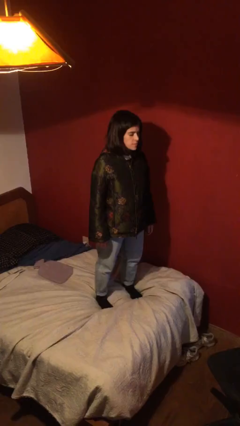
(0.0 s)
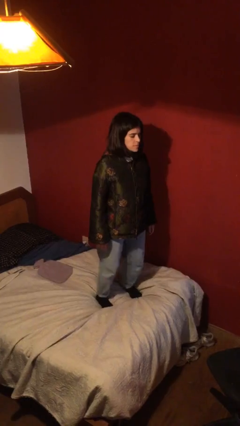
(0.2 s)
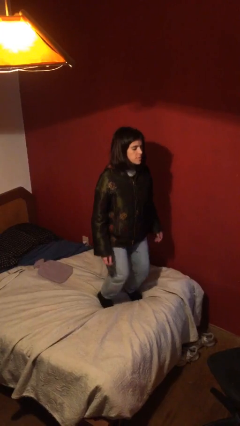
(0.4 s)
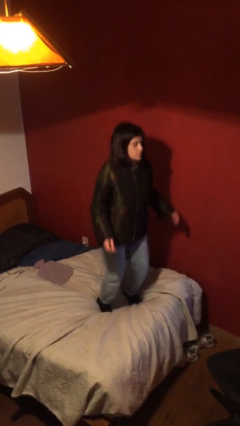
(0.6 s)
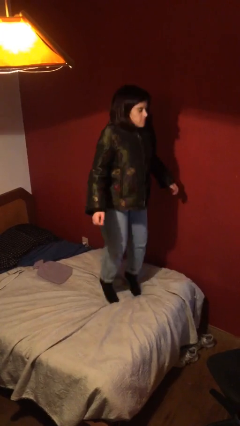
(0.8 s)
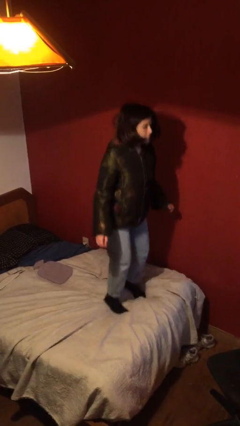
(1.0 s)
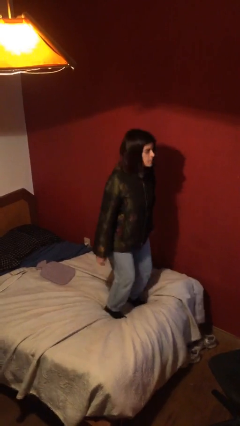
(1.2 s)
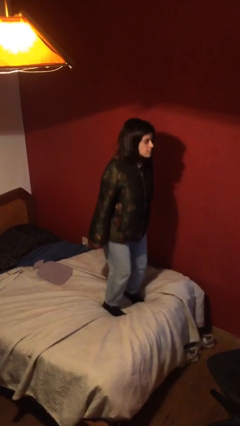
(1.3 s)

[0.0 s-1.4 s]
person jumps on bed

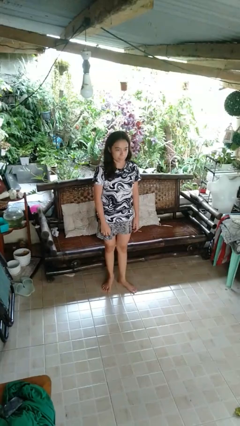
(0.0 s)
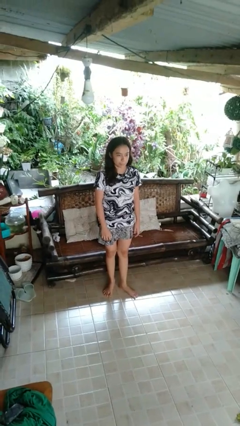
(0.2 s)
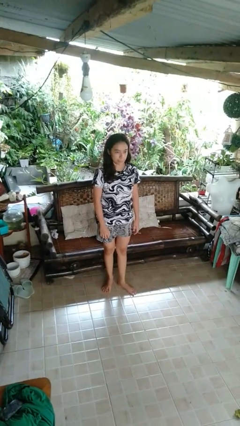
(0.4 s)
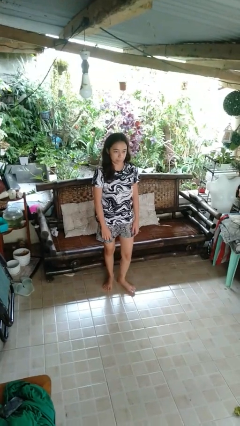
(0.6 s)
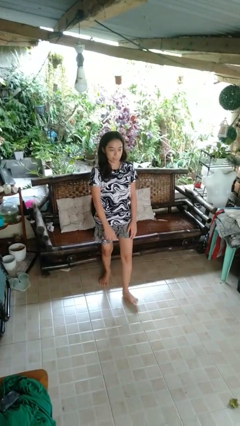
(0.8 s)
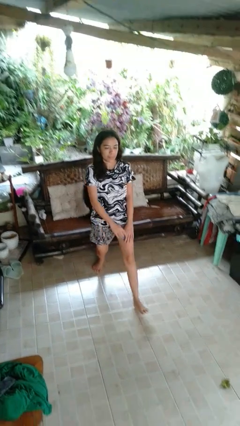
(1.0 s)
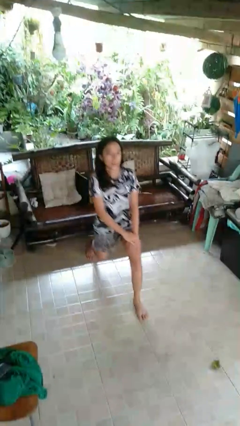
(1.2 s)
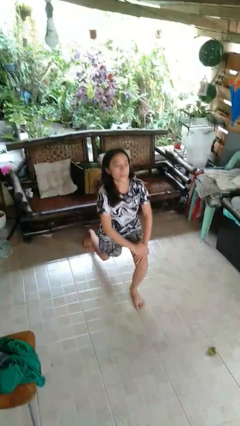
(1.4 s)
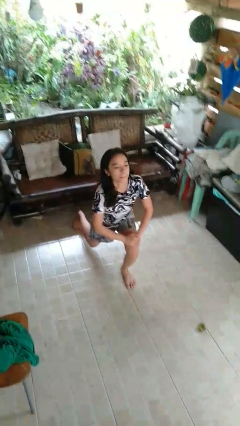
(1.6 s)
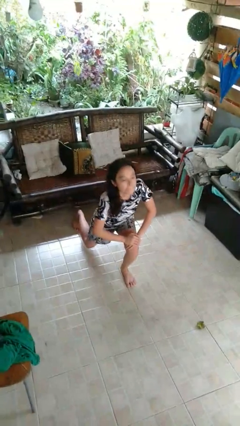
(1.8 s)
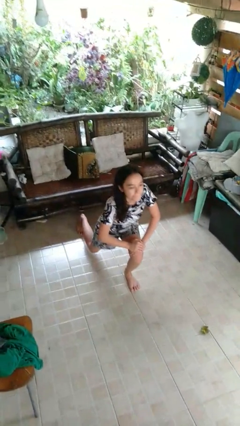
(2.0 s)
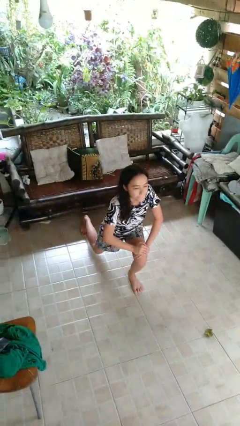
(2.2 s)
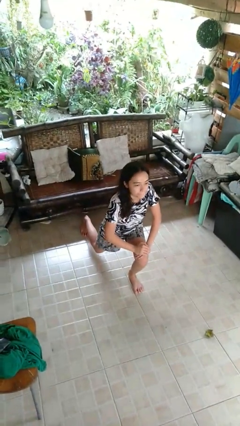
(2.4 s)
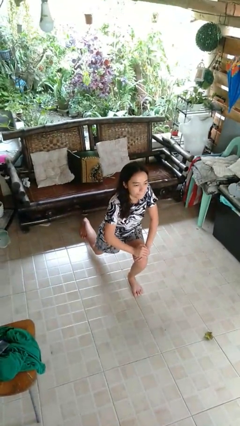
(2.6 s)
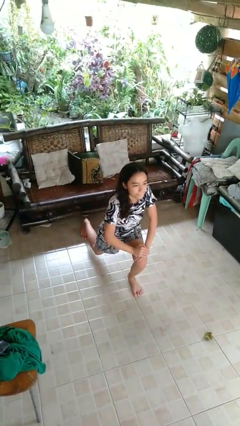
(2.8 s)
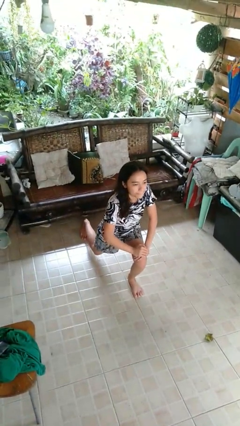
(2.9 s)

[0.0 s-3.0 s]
person exercises with lunges

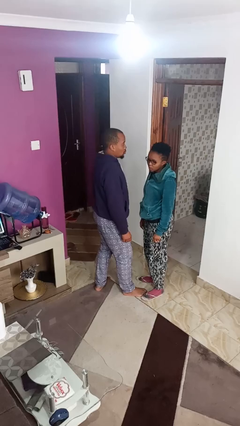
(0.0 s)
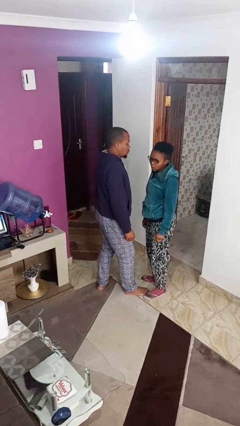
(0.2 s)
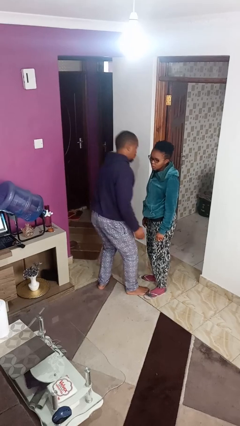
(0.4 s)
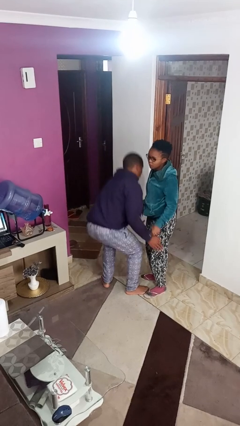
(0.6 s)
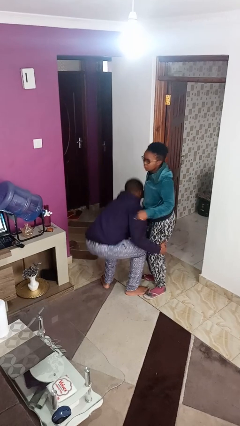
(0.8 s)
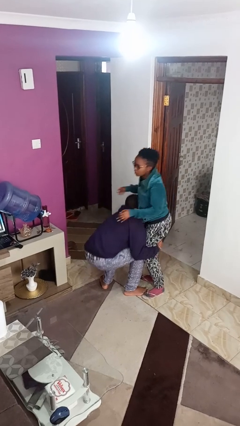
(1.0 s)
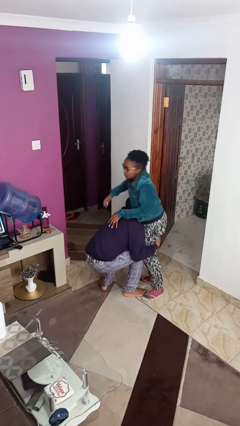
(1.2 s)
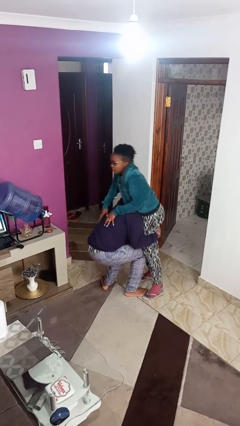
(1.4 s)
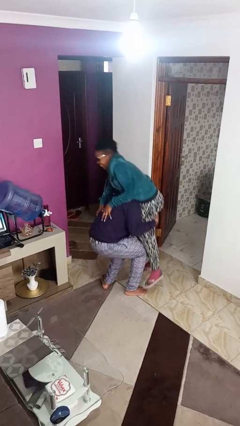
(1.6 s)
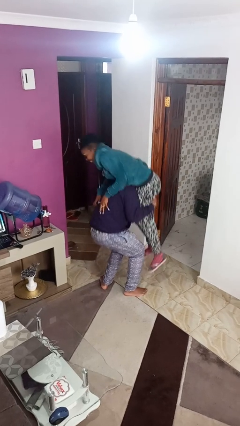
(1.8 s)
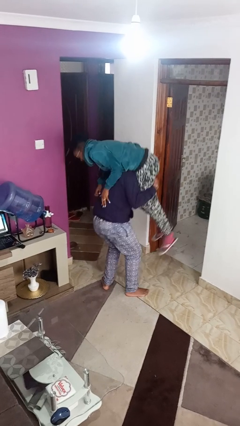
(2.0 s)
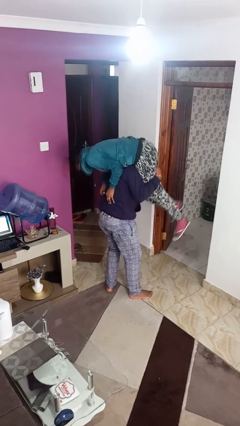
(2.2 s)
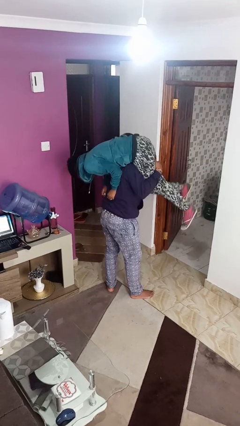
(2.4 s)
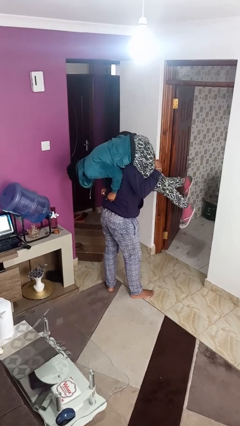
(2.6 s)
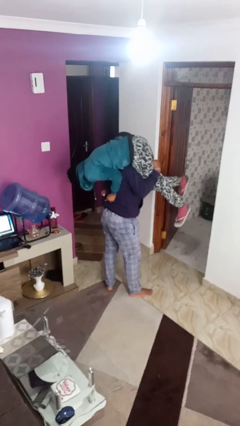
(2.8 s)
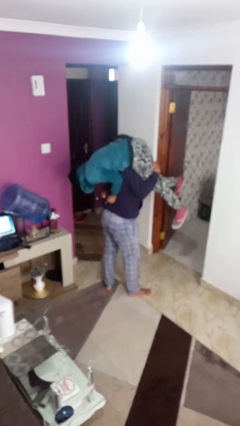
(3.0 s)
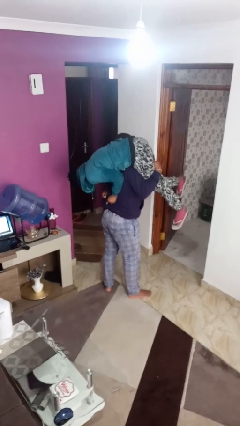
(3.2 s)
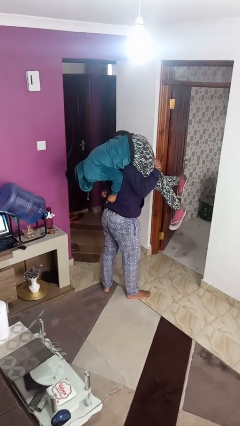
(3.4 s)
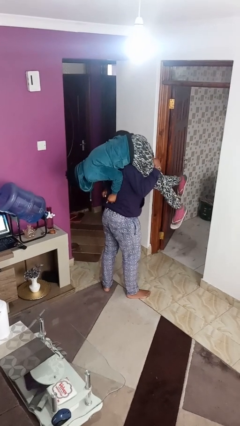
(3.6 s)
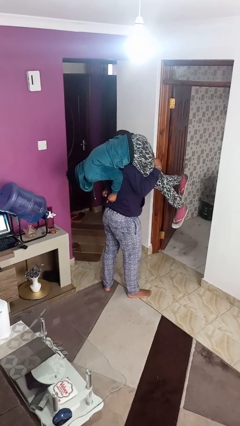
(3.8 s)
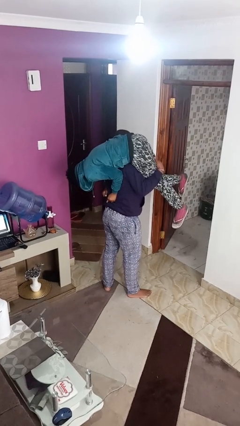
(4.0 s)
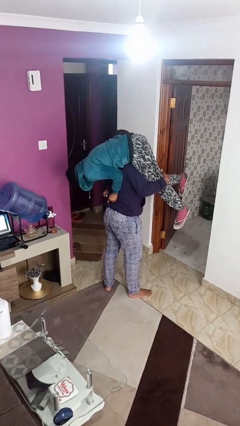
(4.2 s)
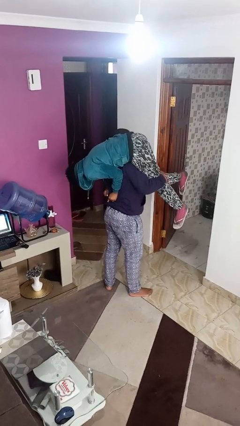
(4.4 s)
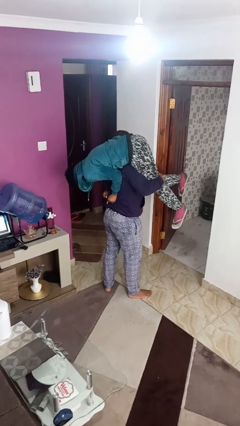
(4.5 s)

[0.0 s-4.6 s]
person carries person over shoulder

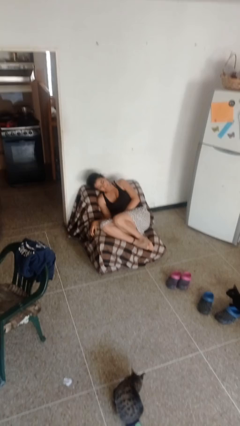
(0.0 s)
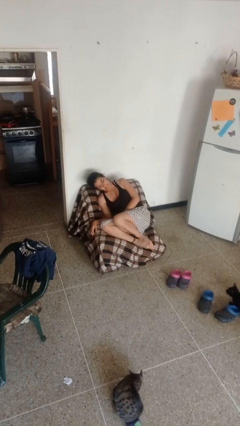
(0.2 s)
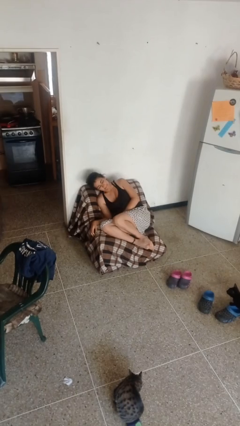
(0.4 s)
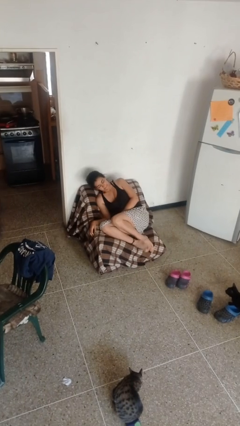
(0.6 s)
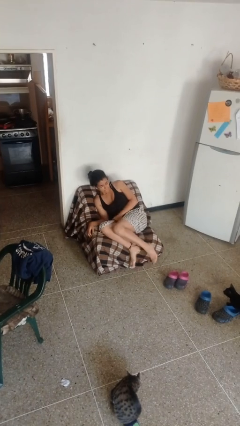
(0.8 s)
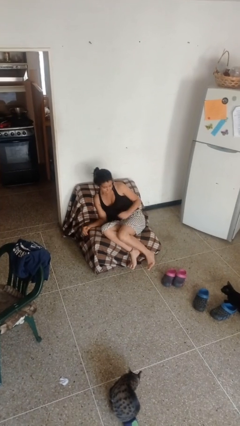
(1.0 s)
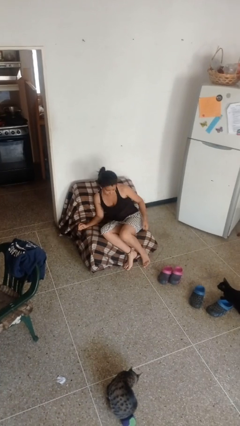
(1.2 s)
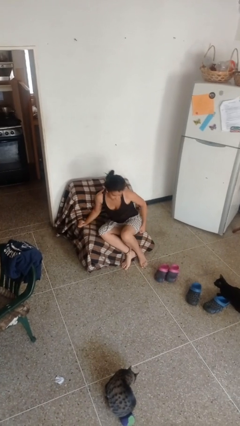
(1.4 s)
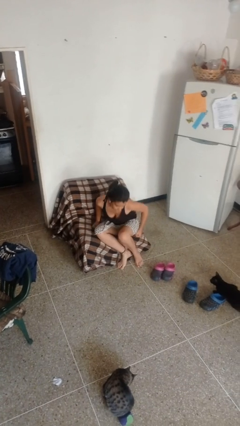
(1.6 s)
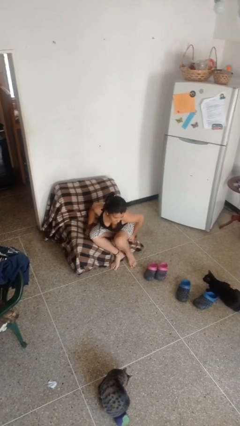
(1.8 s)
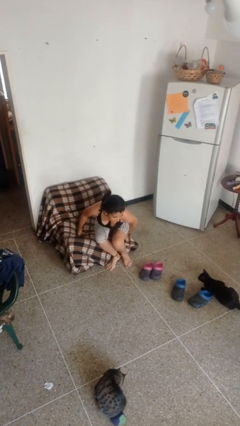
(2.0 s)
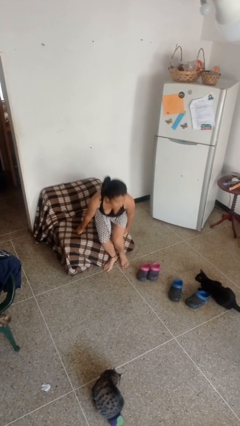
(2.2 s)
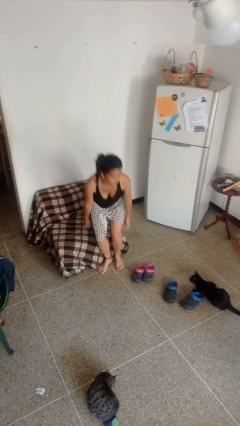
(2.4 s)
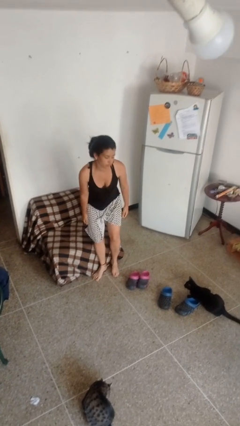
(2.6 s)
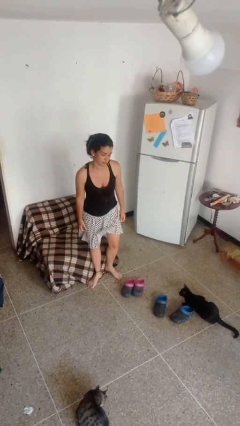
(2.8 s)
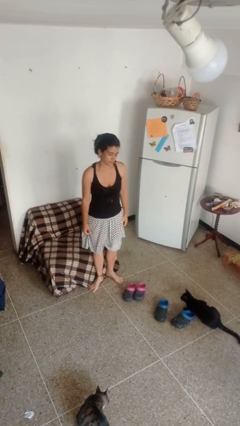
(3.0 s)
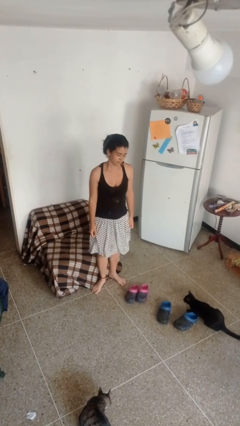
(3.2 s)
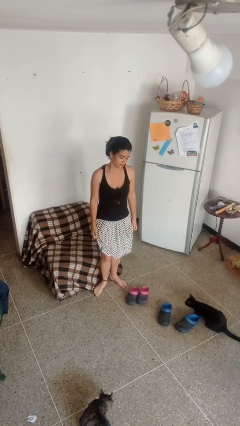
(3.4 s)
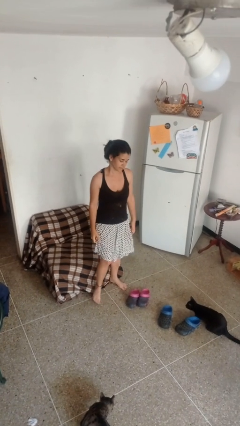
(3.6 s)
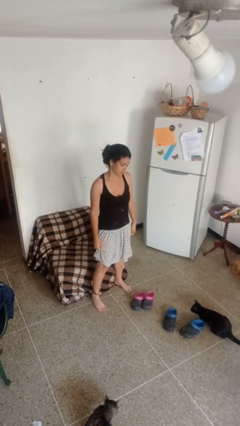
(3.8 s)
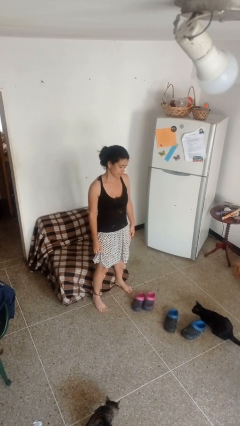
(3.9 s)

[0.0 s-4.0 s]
person stands up

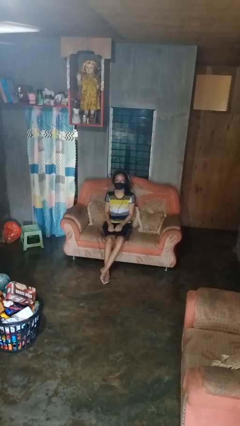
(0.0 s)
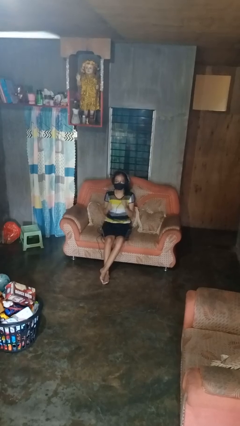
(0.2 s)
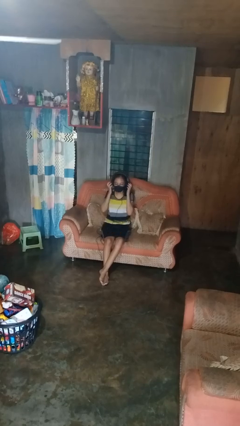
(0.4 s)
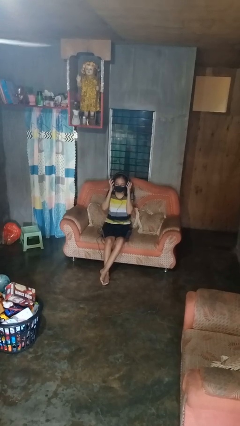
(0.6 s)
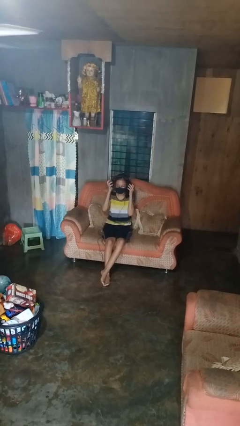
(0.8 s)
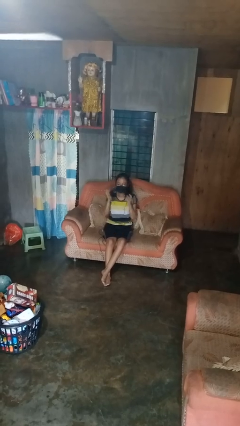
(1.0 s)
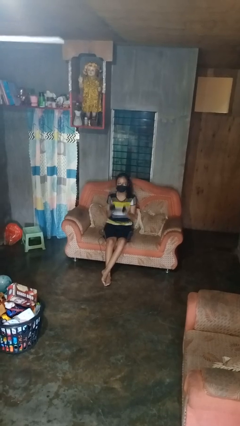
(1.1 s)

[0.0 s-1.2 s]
person takes off headphones

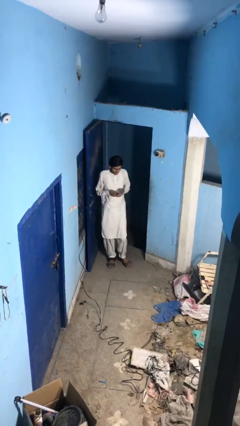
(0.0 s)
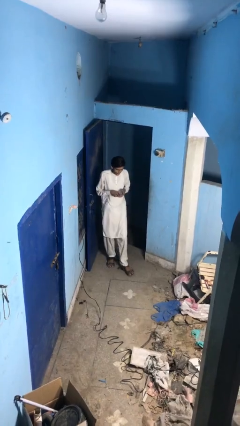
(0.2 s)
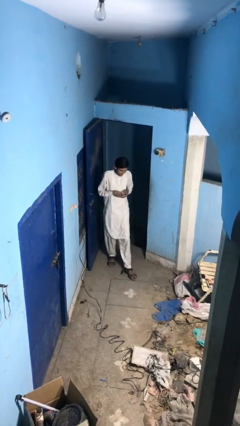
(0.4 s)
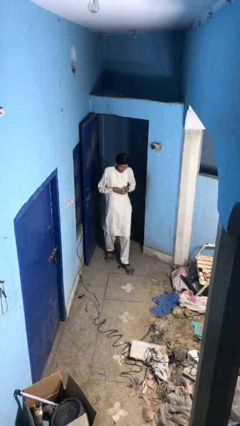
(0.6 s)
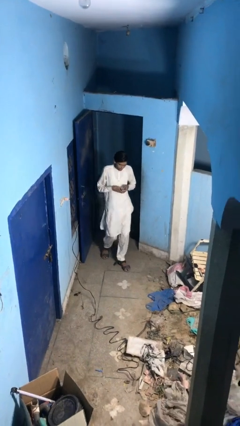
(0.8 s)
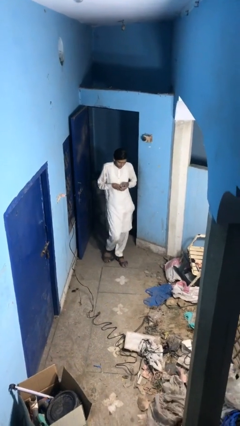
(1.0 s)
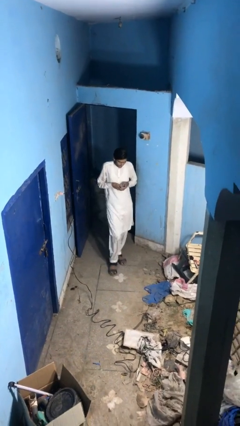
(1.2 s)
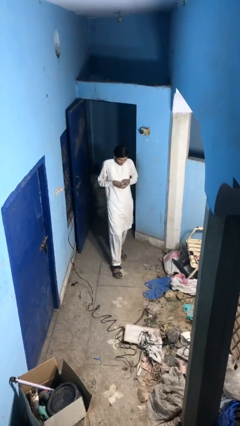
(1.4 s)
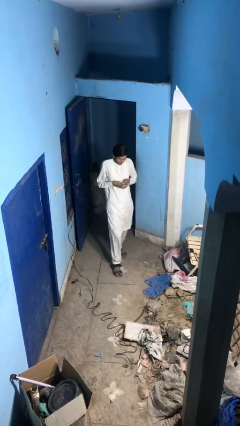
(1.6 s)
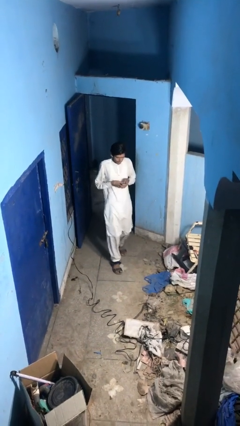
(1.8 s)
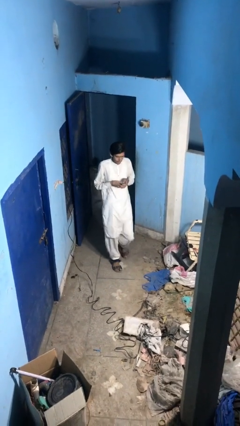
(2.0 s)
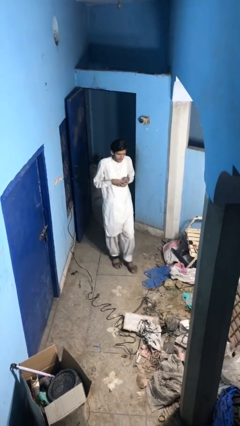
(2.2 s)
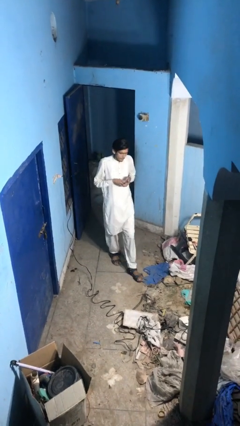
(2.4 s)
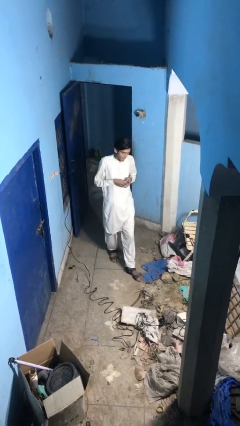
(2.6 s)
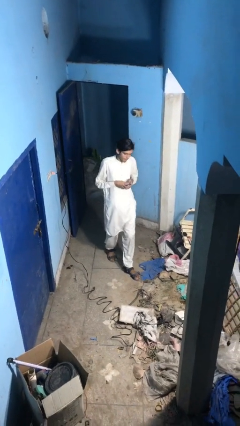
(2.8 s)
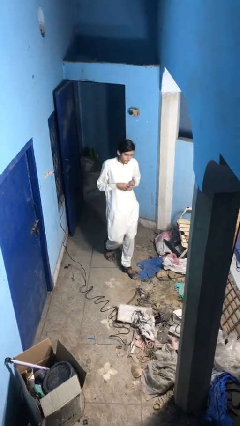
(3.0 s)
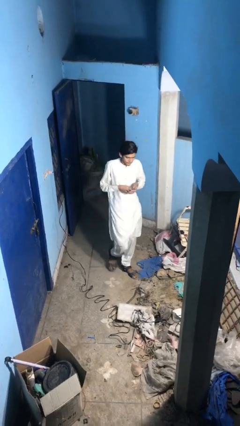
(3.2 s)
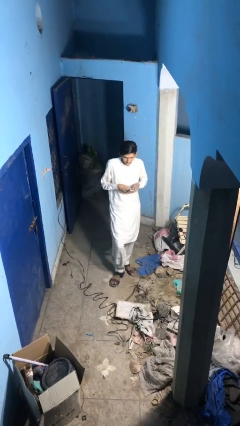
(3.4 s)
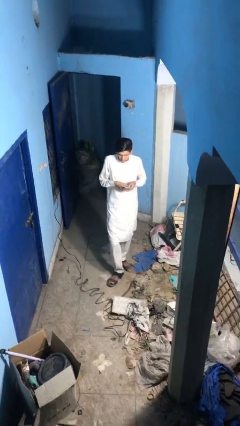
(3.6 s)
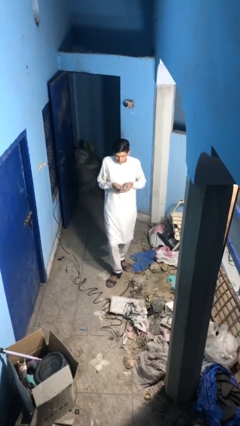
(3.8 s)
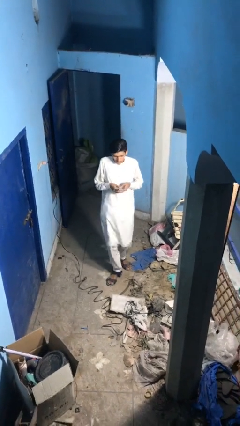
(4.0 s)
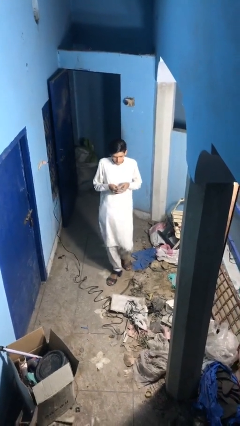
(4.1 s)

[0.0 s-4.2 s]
person texts on phone
